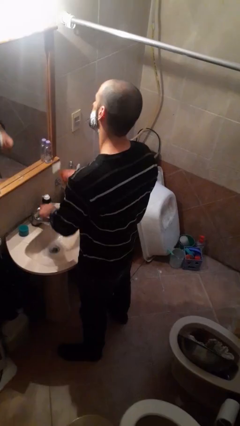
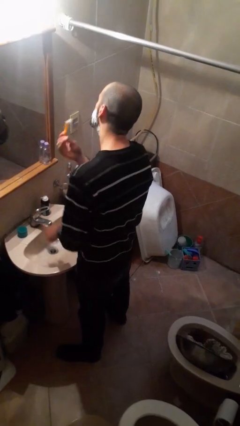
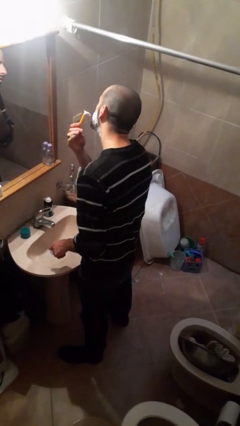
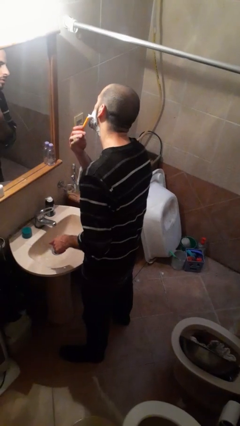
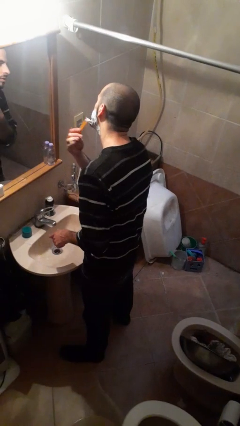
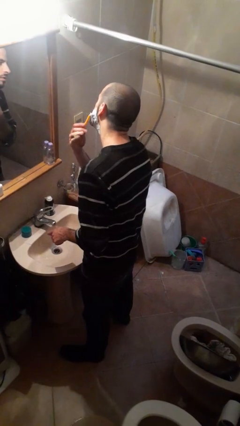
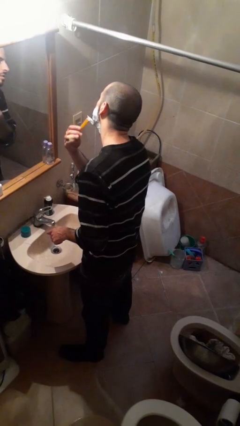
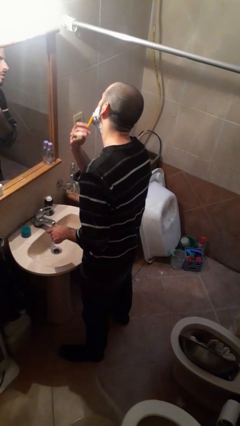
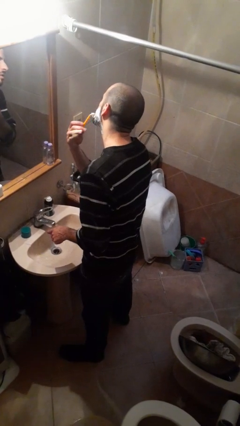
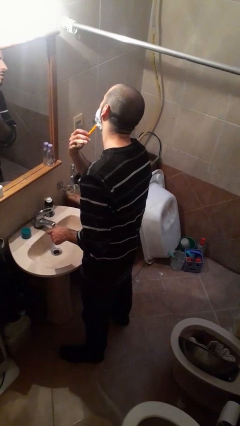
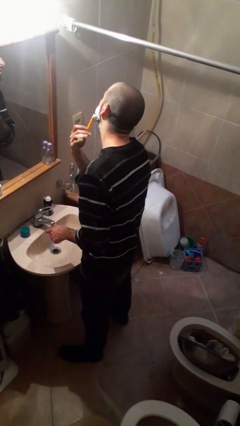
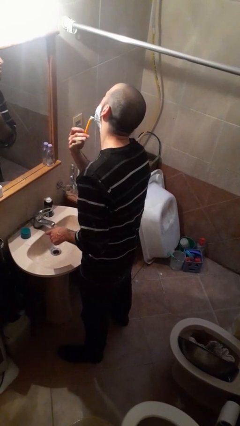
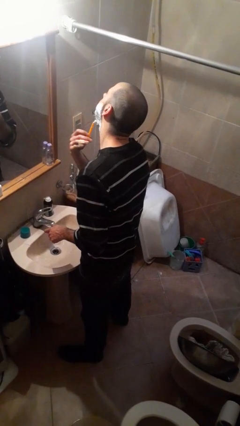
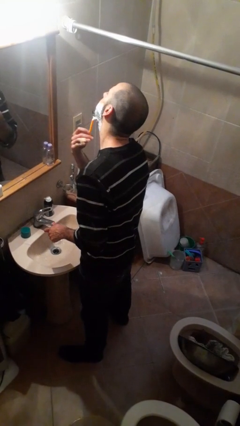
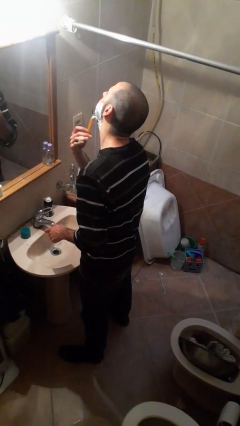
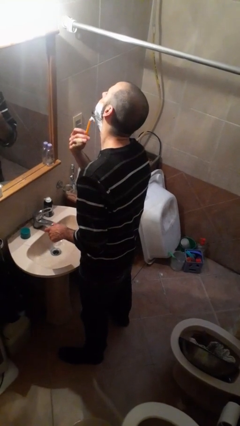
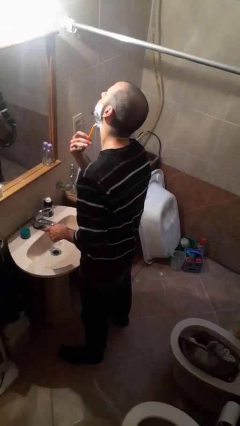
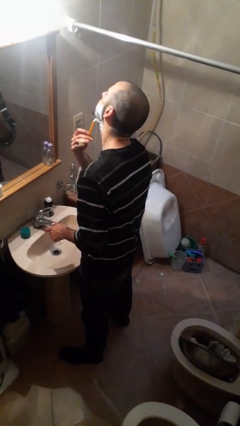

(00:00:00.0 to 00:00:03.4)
person shaves face

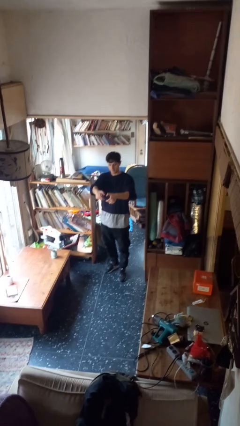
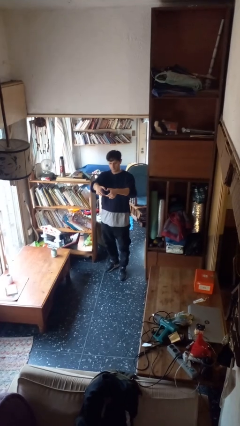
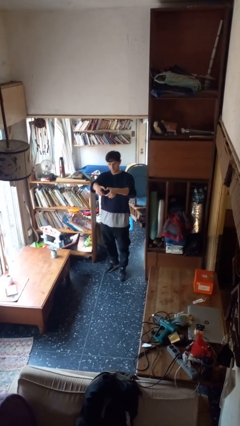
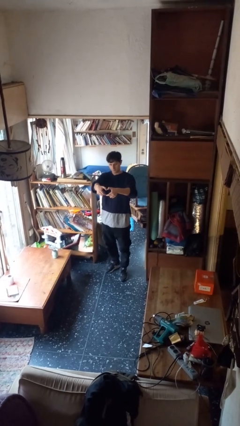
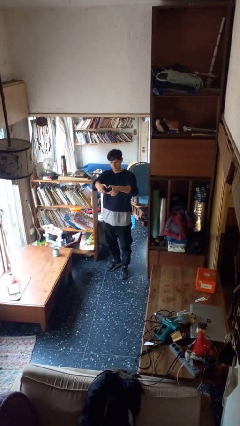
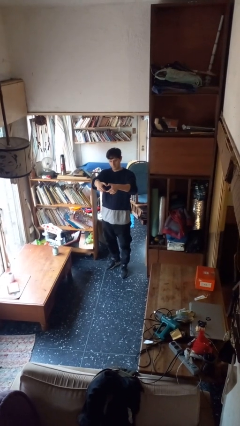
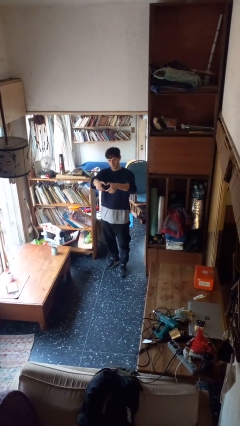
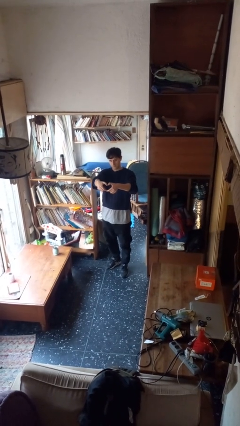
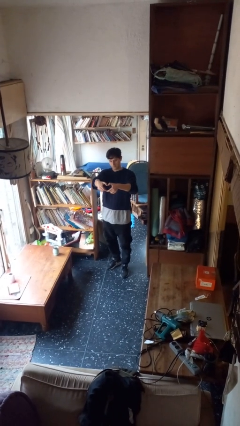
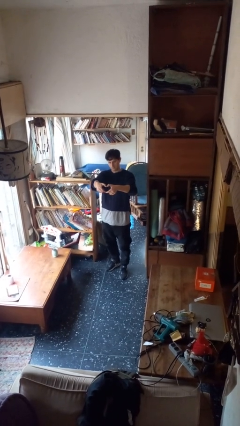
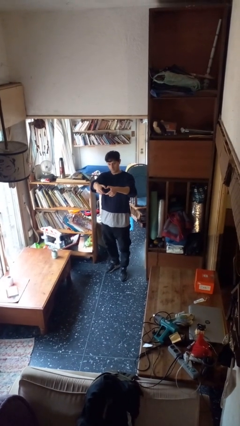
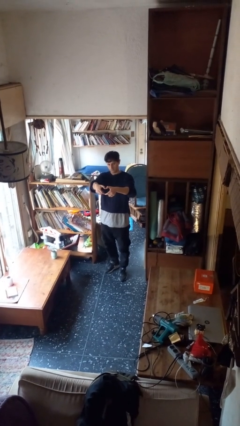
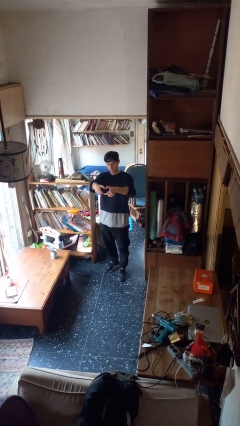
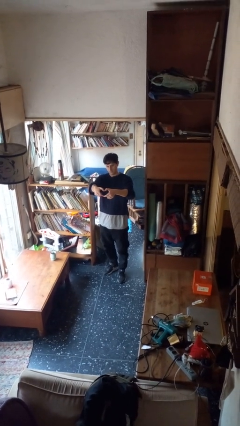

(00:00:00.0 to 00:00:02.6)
person gestures heart

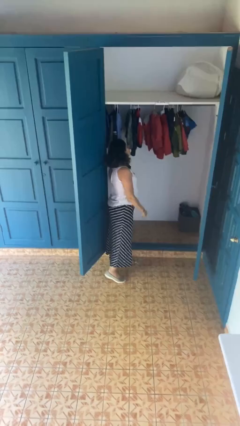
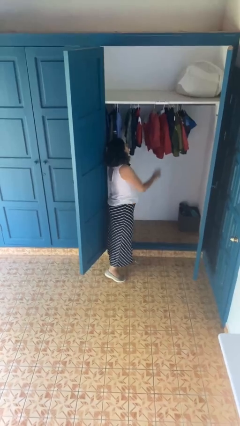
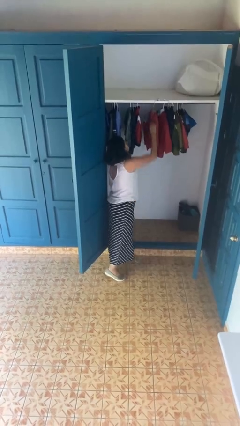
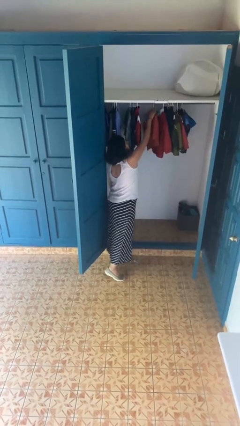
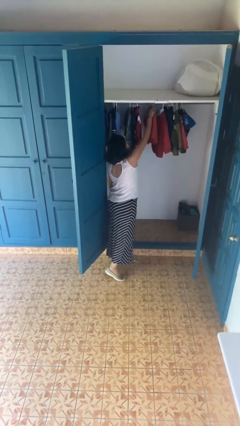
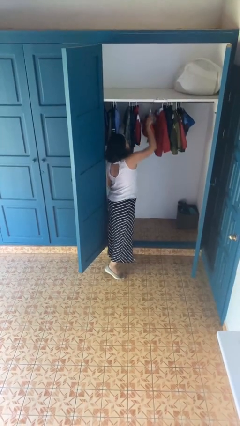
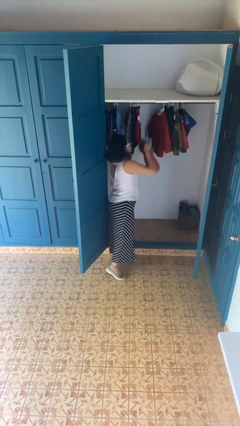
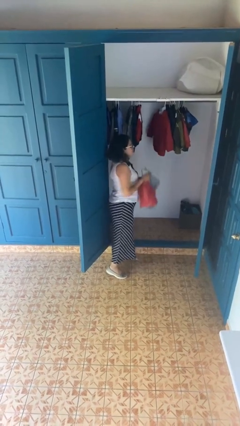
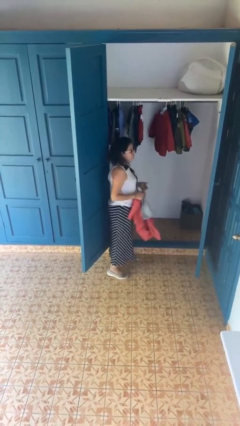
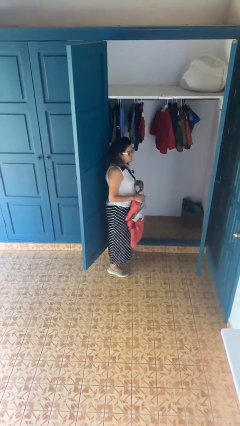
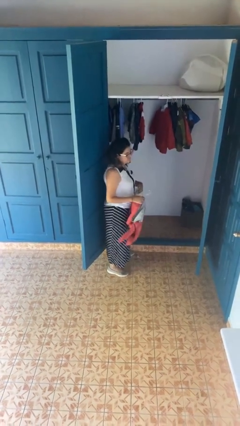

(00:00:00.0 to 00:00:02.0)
person takes clothes from closet

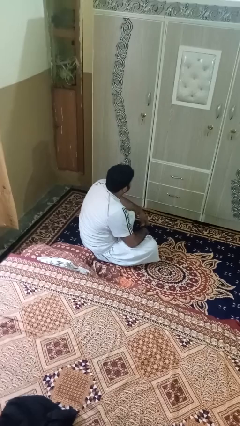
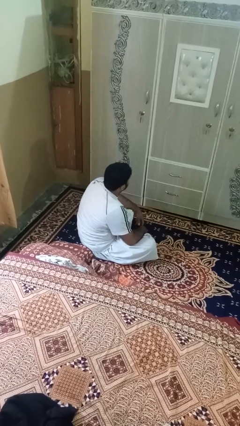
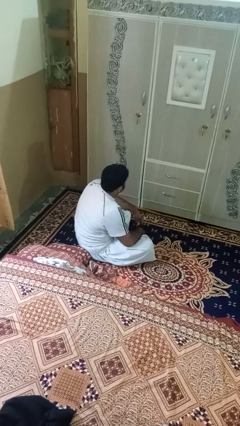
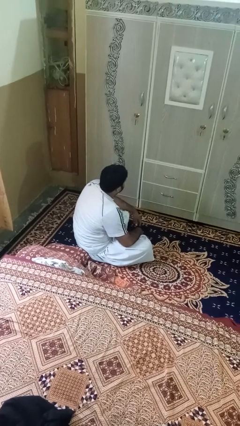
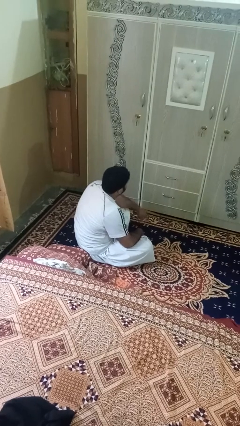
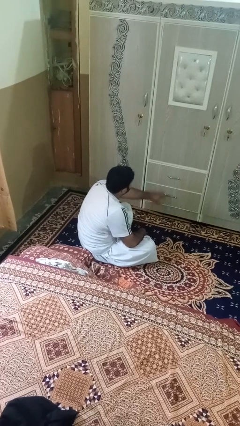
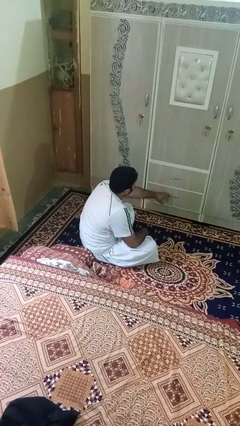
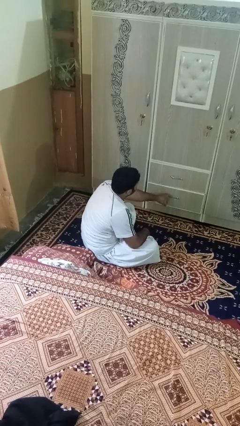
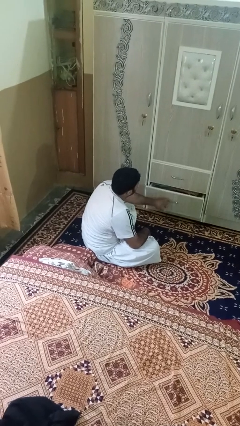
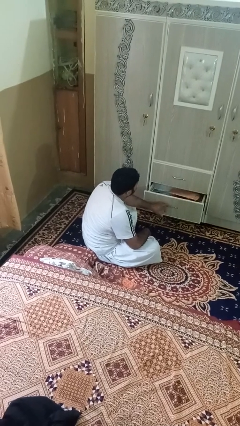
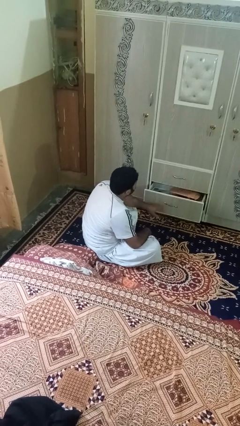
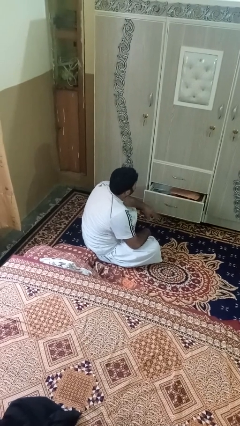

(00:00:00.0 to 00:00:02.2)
person opens dresser drawer

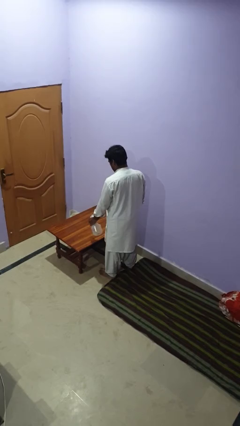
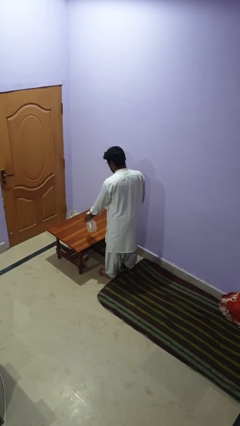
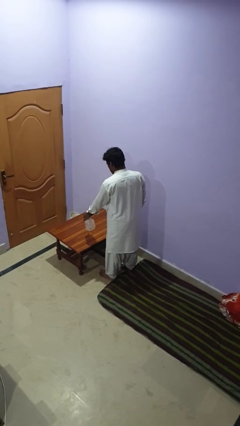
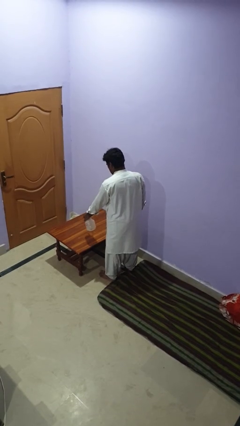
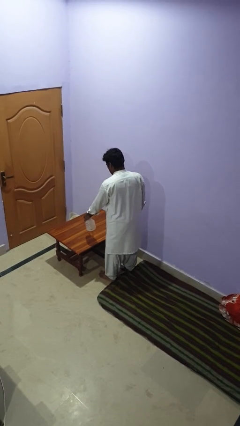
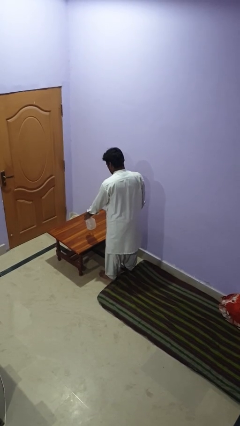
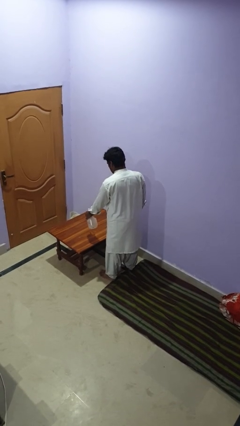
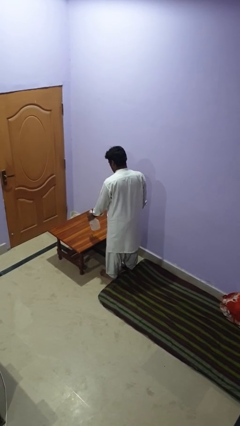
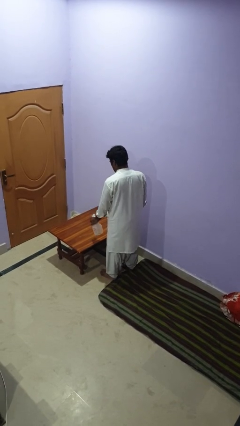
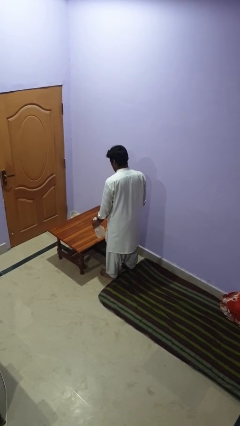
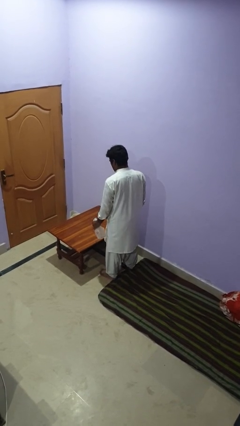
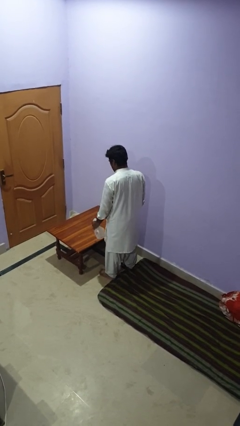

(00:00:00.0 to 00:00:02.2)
person sprays from bottle

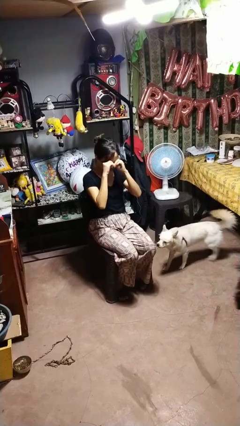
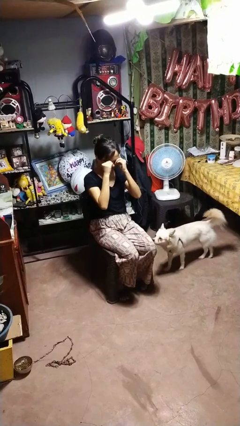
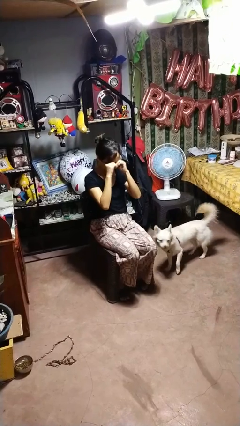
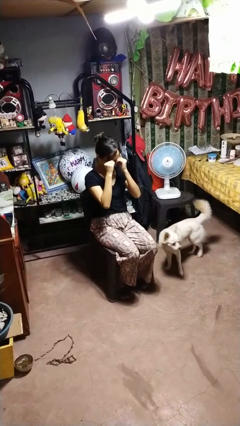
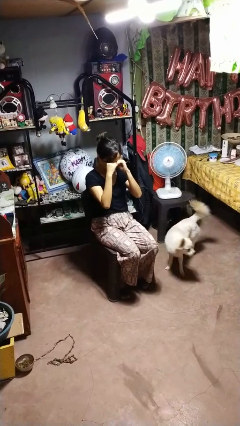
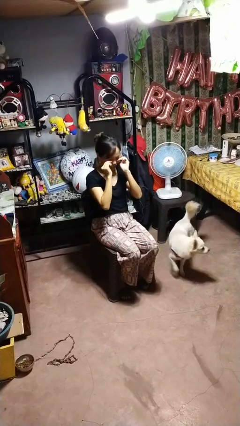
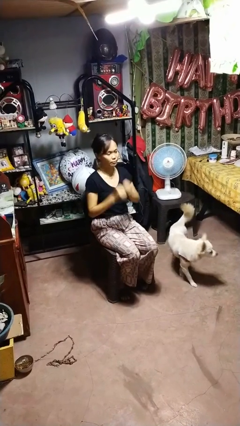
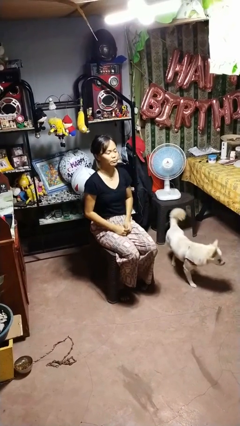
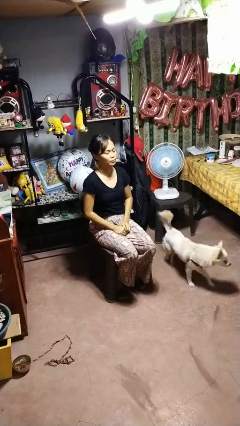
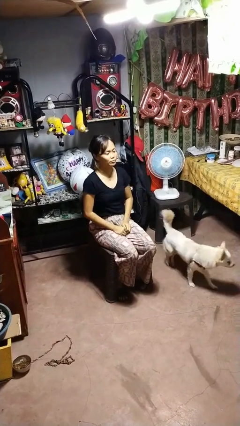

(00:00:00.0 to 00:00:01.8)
person rubs eyes

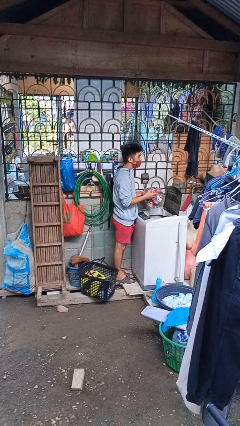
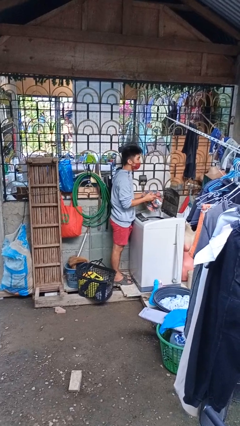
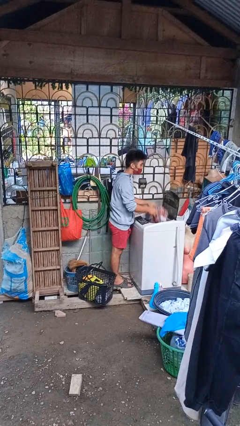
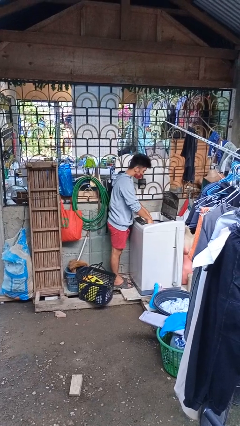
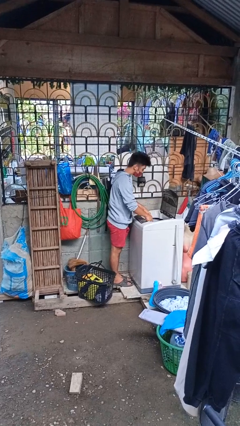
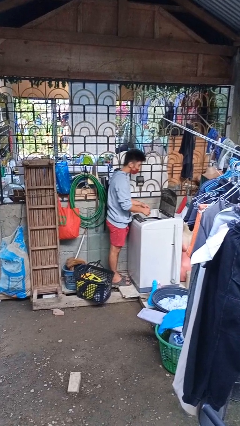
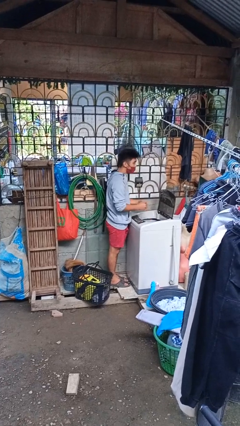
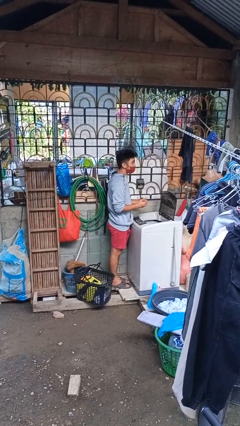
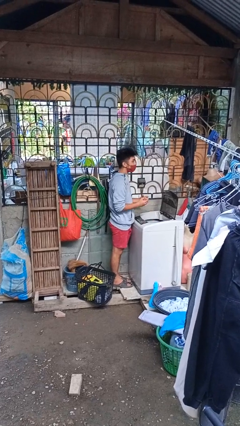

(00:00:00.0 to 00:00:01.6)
person loads dryer

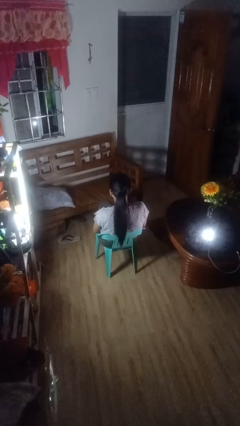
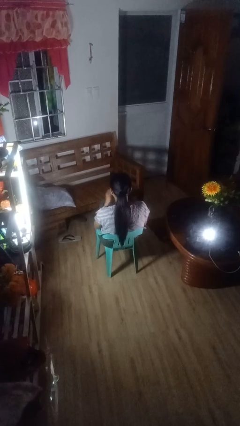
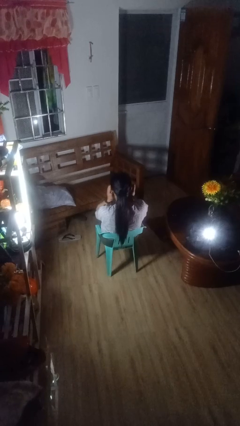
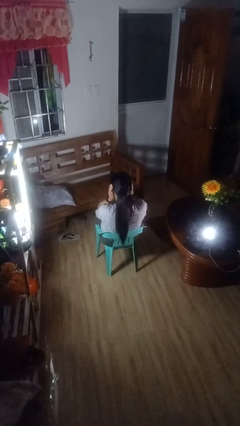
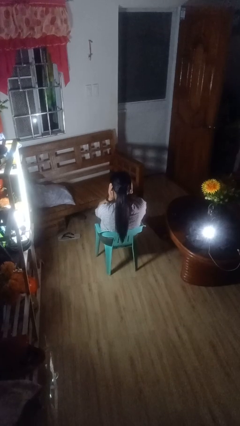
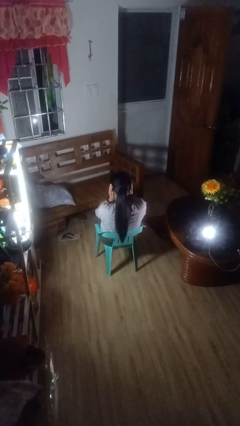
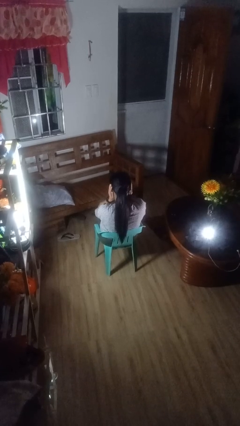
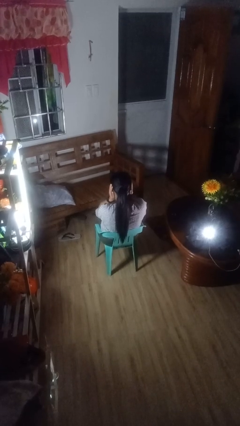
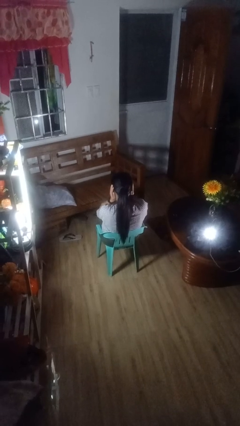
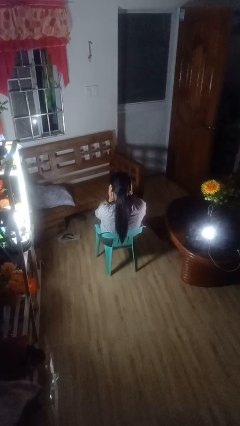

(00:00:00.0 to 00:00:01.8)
person puts fingers in ear
